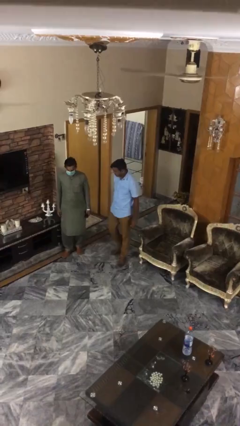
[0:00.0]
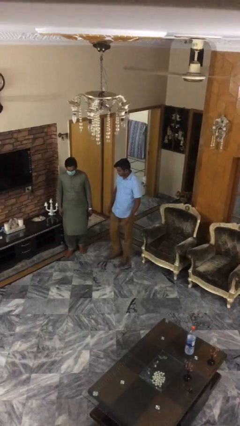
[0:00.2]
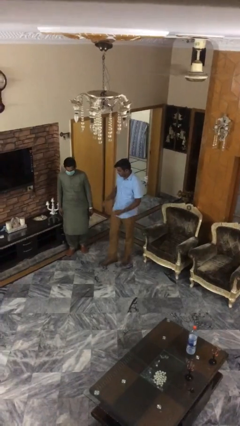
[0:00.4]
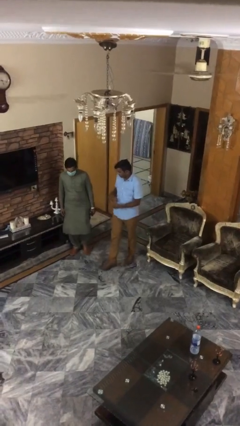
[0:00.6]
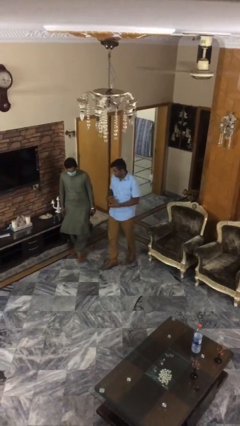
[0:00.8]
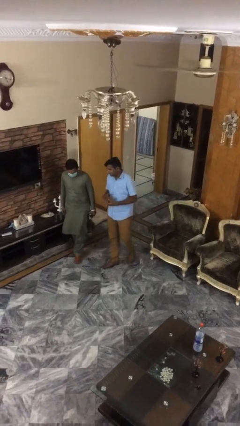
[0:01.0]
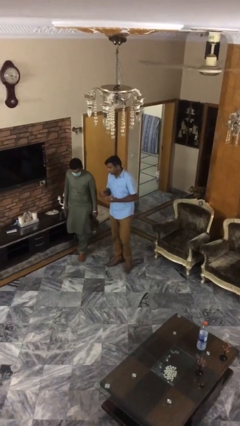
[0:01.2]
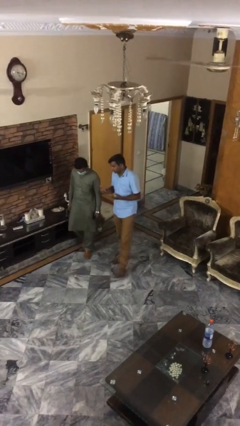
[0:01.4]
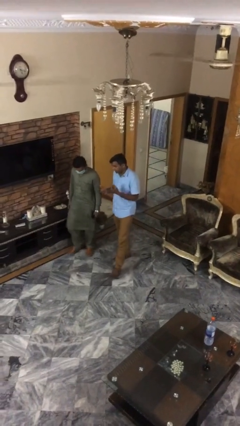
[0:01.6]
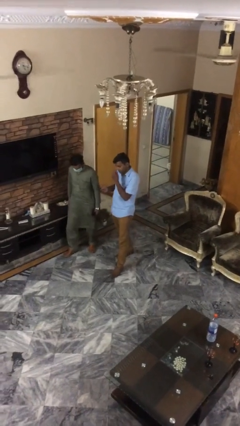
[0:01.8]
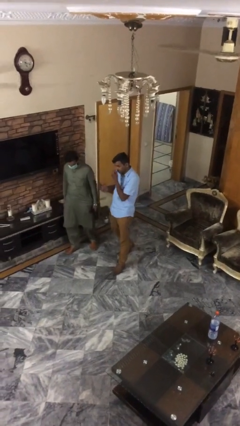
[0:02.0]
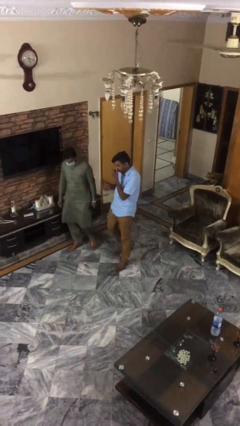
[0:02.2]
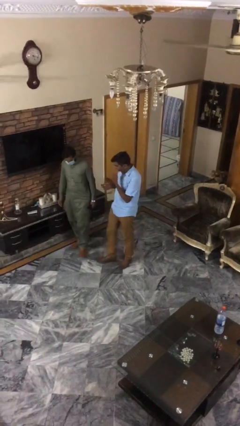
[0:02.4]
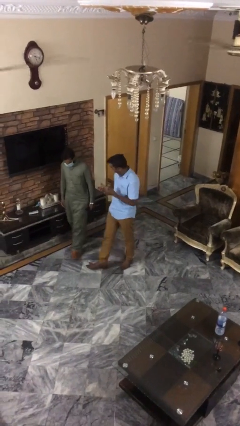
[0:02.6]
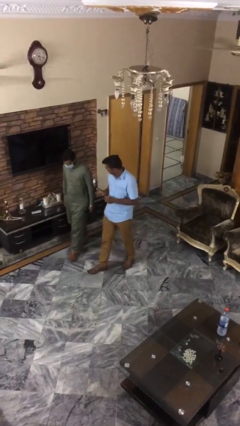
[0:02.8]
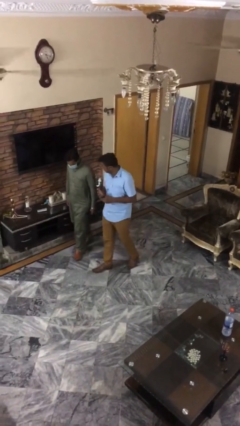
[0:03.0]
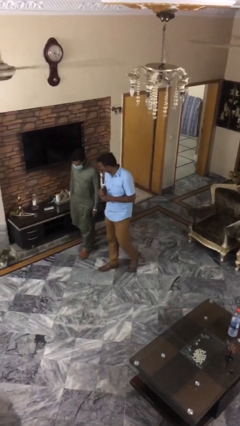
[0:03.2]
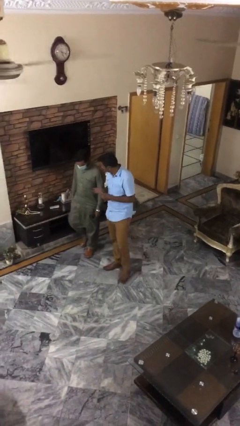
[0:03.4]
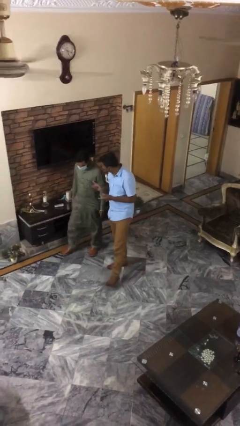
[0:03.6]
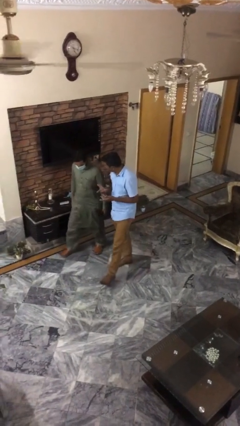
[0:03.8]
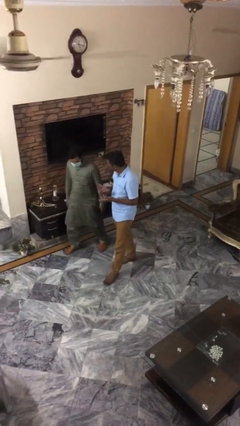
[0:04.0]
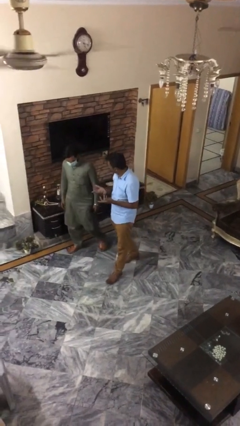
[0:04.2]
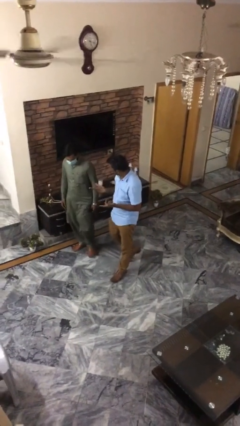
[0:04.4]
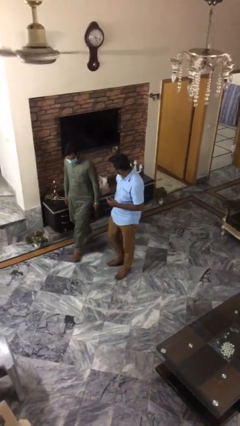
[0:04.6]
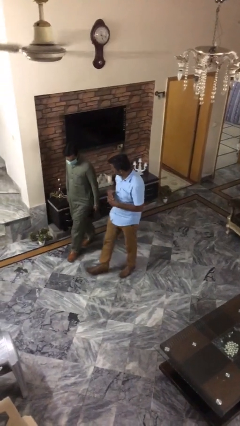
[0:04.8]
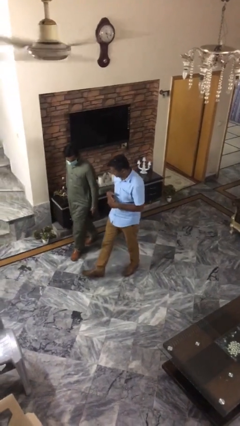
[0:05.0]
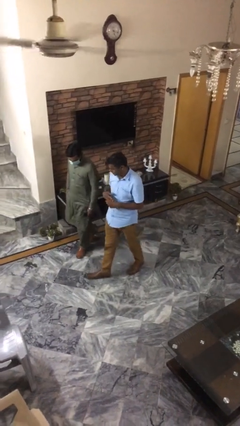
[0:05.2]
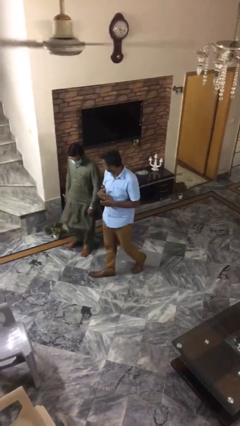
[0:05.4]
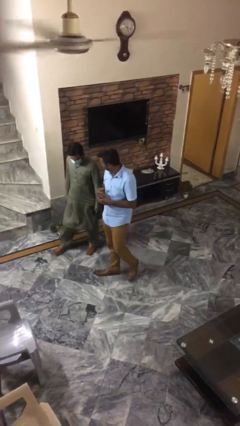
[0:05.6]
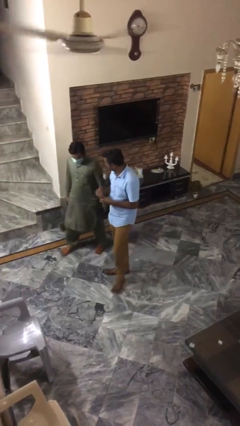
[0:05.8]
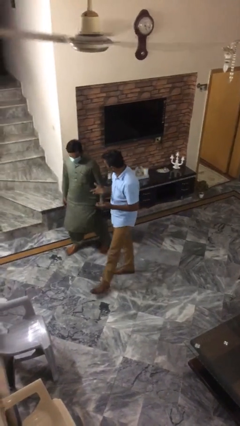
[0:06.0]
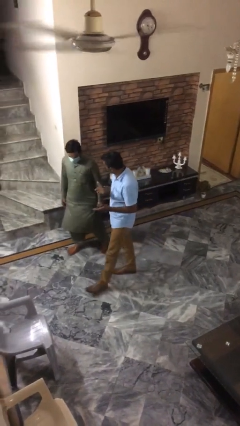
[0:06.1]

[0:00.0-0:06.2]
person talks to person

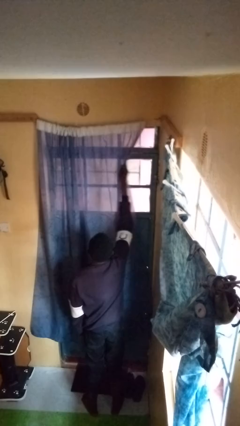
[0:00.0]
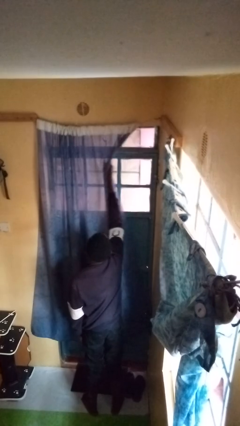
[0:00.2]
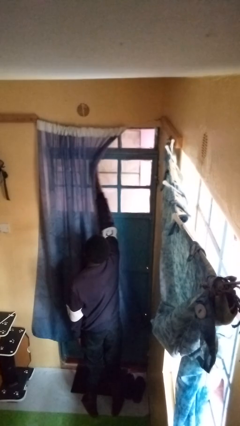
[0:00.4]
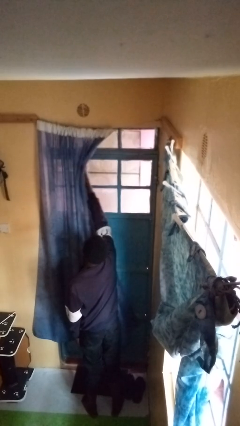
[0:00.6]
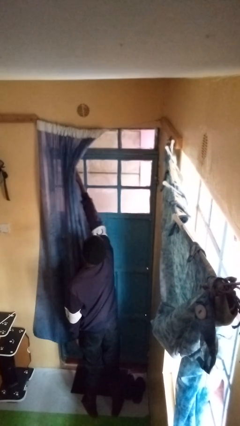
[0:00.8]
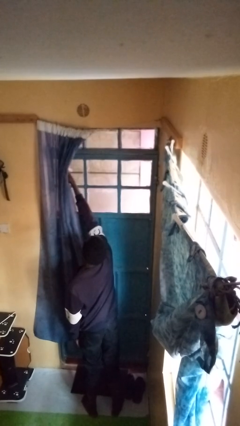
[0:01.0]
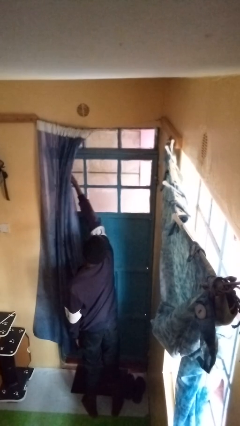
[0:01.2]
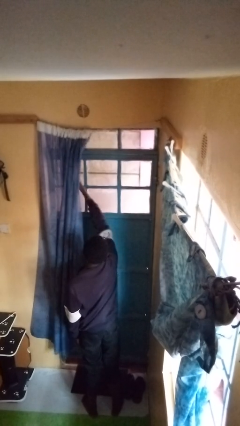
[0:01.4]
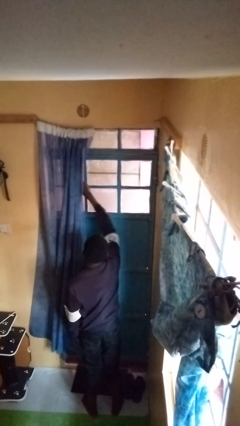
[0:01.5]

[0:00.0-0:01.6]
person opens curtains

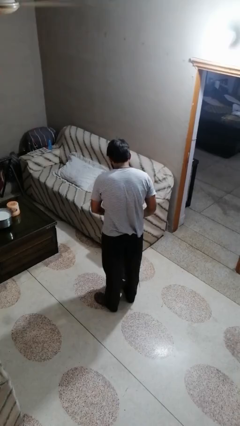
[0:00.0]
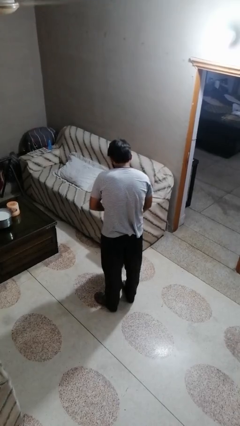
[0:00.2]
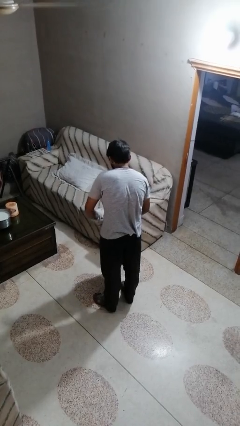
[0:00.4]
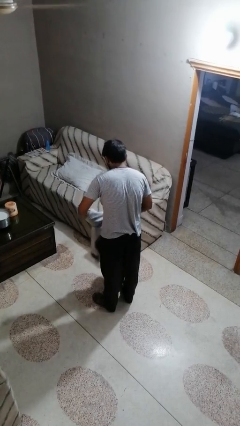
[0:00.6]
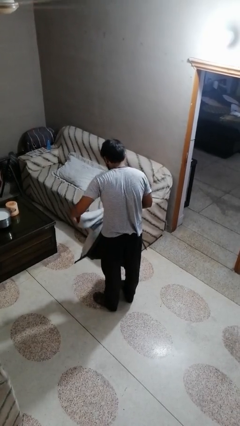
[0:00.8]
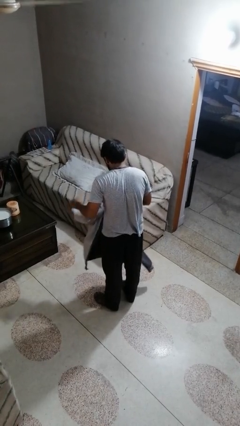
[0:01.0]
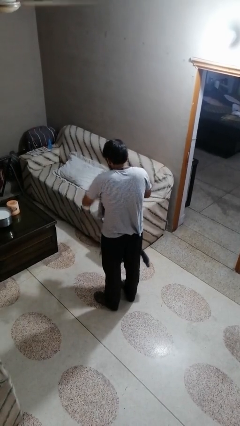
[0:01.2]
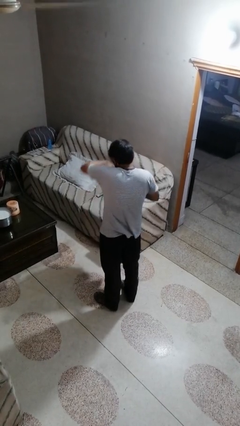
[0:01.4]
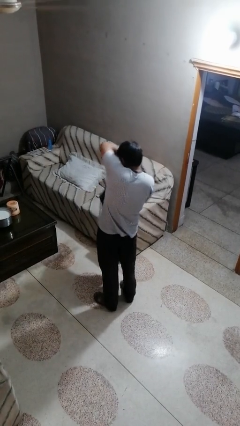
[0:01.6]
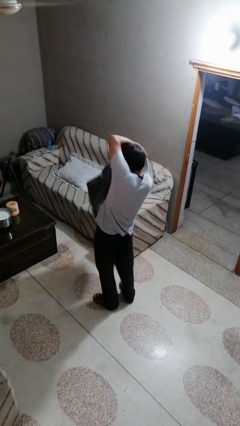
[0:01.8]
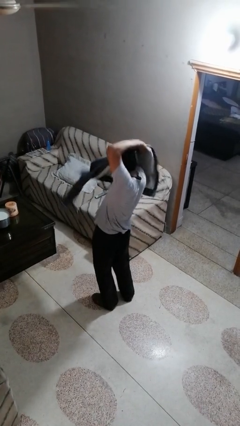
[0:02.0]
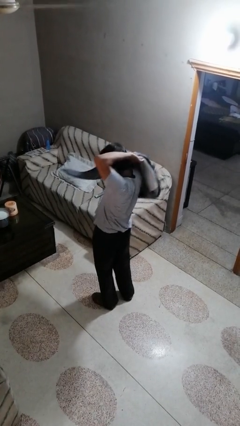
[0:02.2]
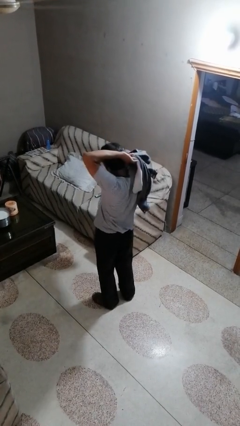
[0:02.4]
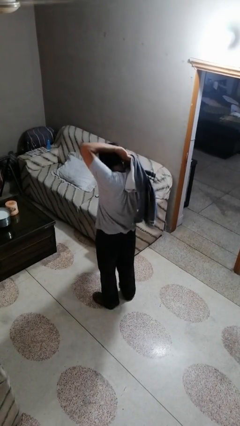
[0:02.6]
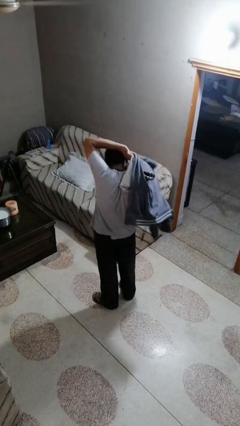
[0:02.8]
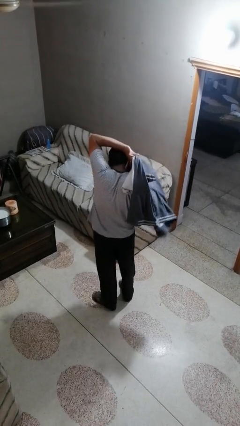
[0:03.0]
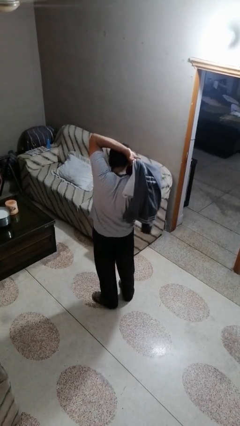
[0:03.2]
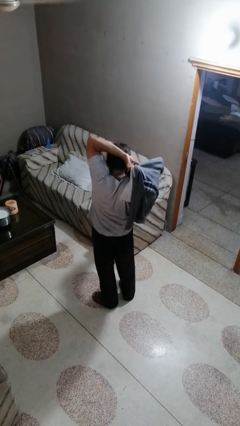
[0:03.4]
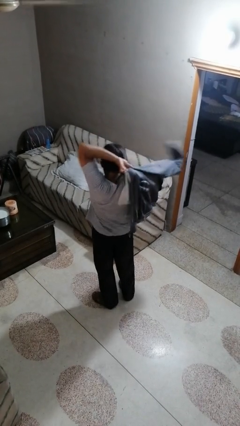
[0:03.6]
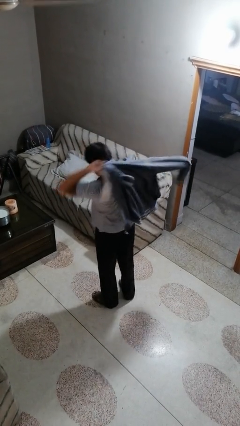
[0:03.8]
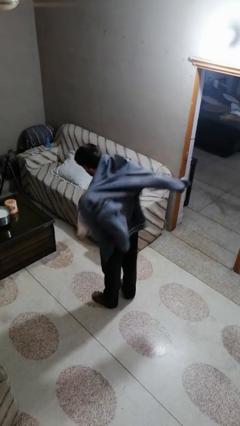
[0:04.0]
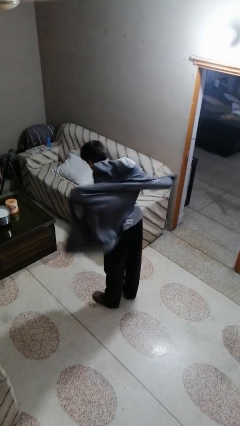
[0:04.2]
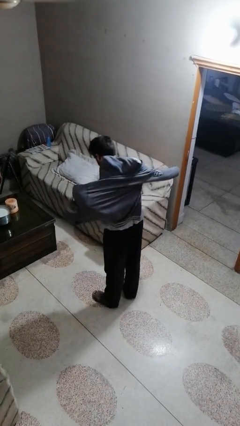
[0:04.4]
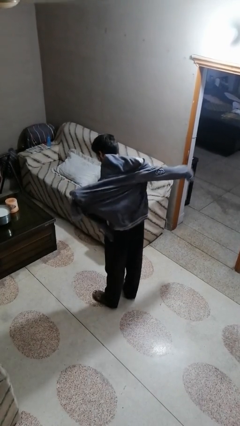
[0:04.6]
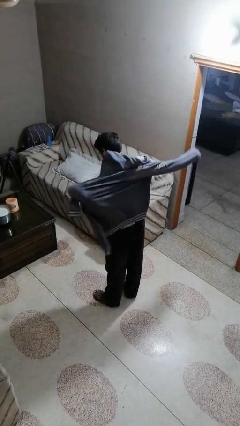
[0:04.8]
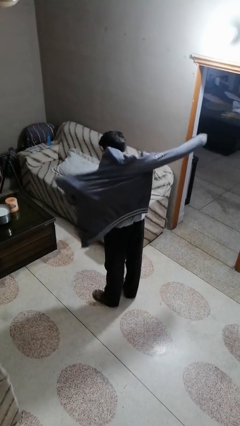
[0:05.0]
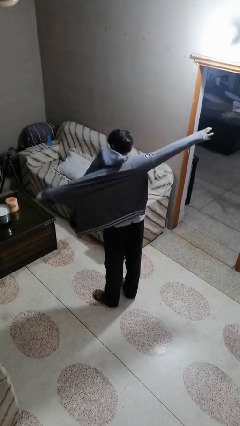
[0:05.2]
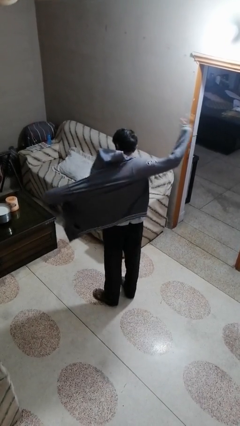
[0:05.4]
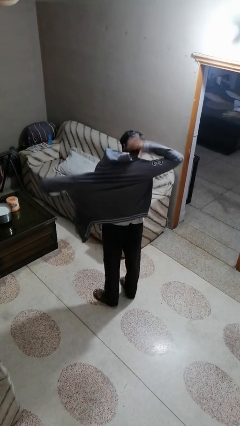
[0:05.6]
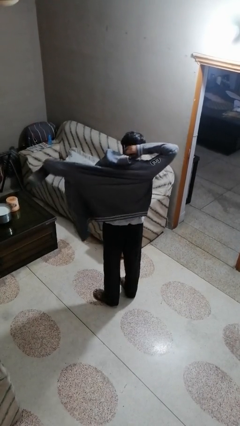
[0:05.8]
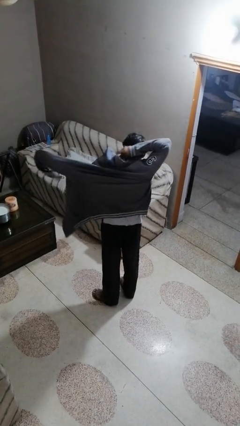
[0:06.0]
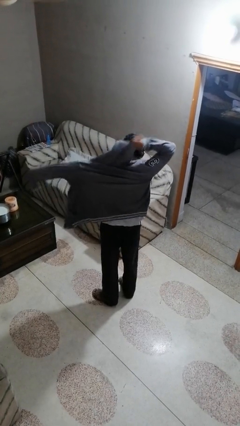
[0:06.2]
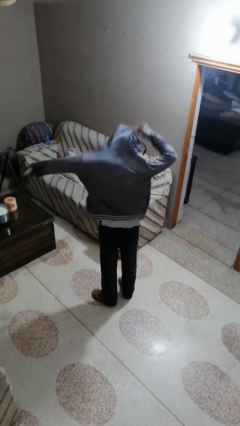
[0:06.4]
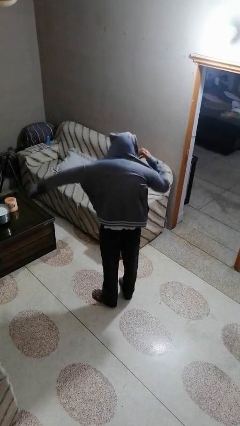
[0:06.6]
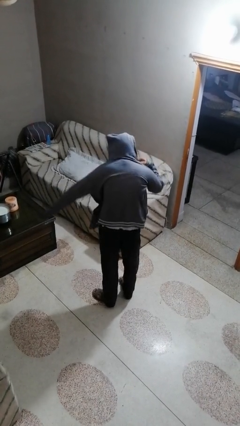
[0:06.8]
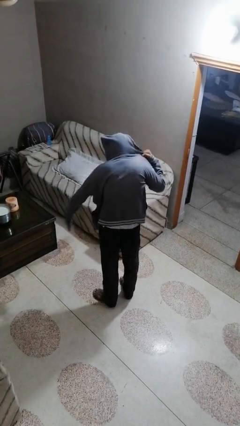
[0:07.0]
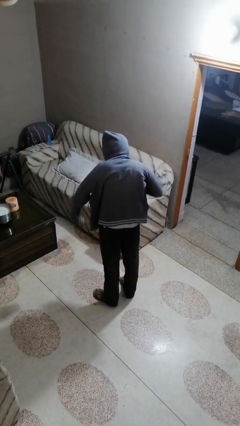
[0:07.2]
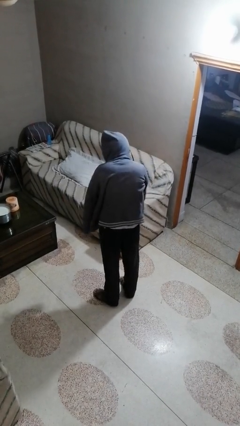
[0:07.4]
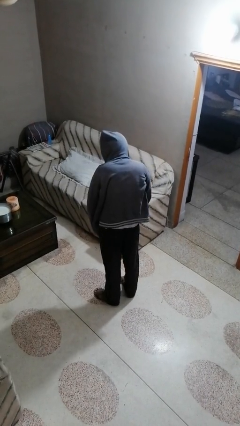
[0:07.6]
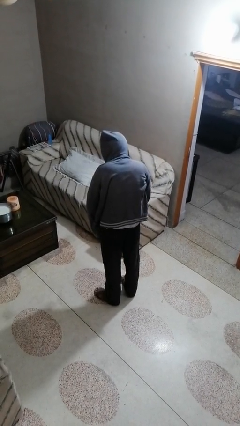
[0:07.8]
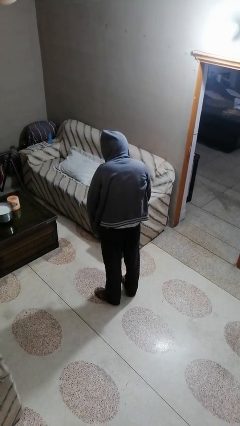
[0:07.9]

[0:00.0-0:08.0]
person puts on hoodie

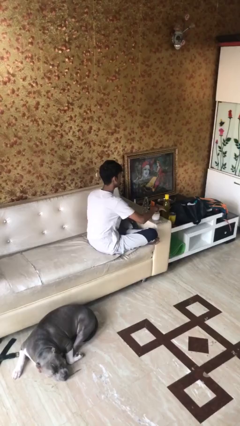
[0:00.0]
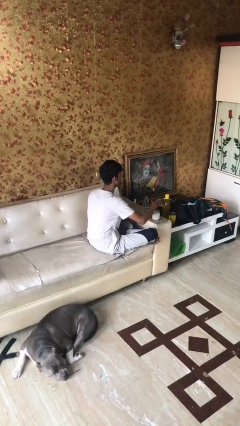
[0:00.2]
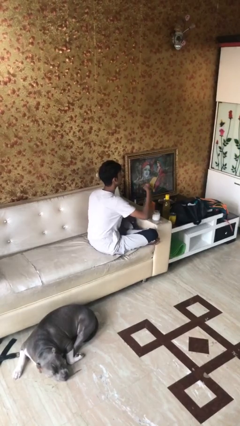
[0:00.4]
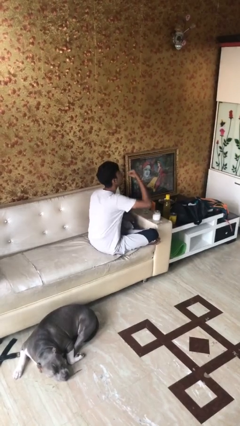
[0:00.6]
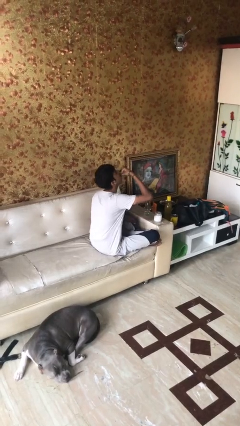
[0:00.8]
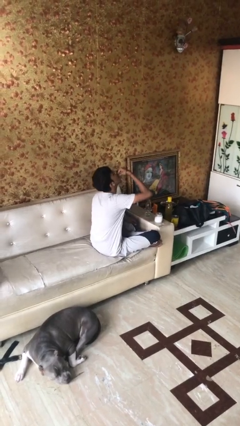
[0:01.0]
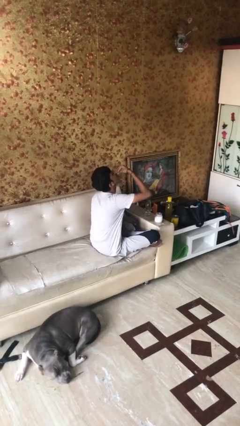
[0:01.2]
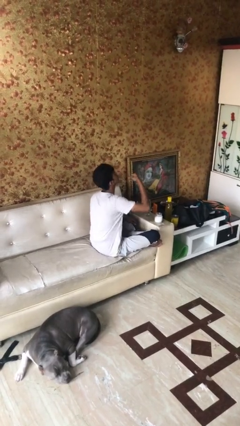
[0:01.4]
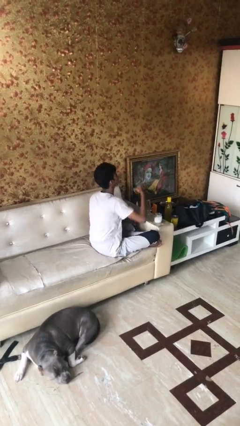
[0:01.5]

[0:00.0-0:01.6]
person takes medicine pills

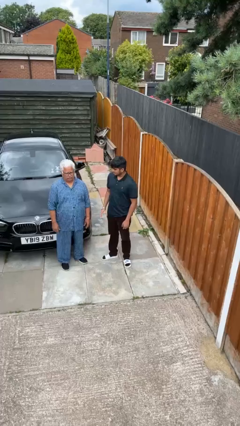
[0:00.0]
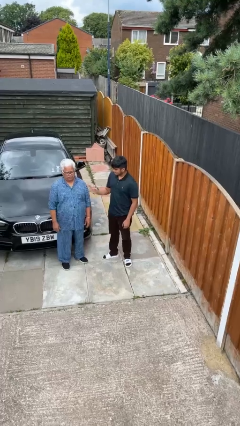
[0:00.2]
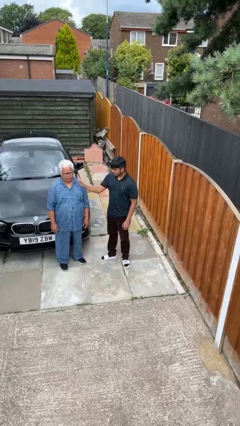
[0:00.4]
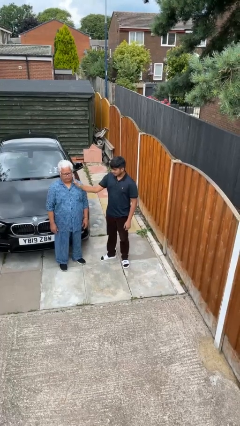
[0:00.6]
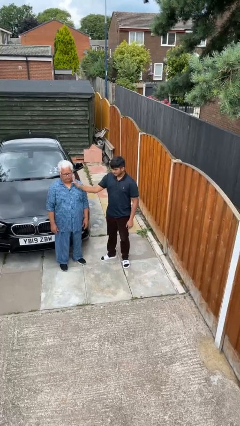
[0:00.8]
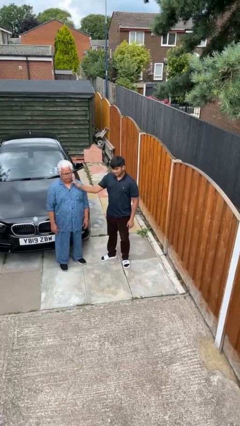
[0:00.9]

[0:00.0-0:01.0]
person touches face of person
